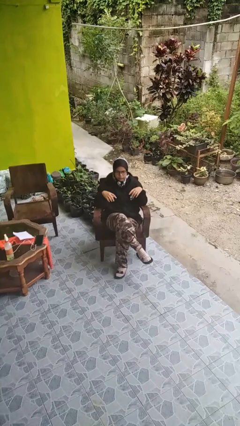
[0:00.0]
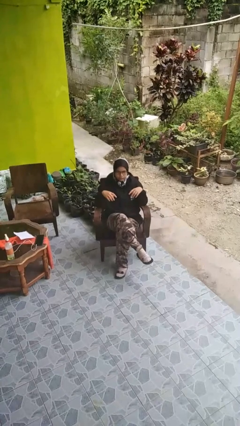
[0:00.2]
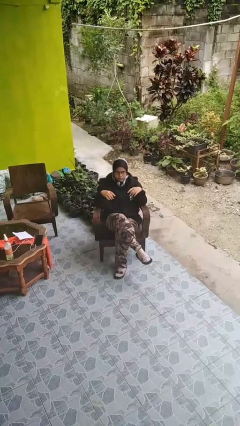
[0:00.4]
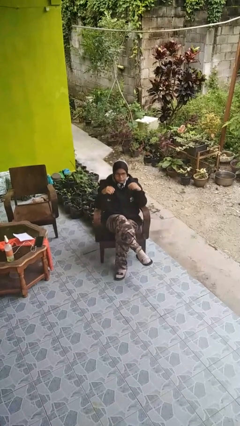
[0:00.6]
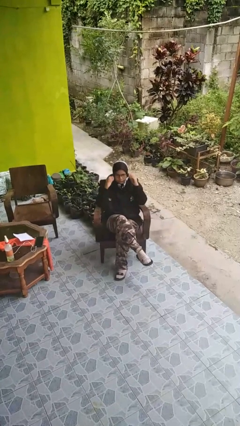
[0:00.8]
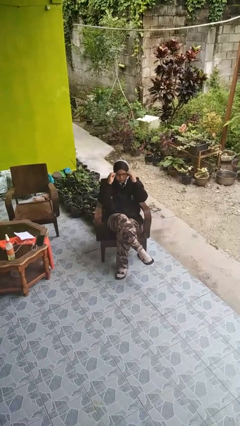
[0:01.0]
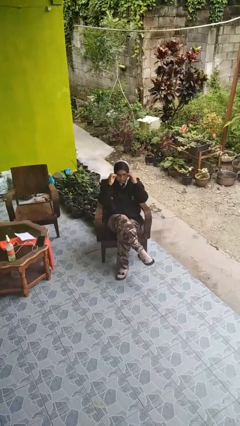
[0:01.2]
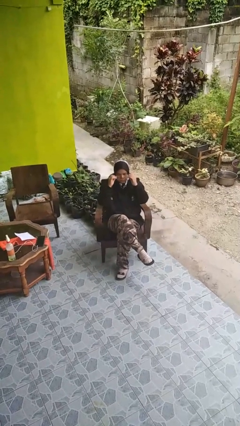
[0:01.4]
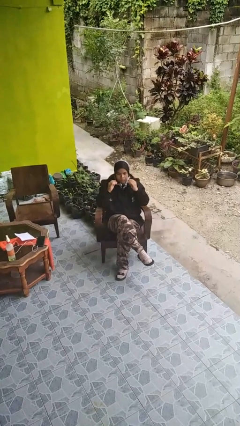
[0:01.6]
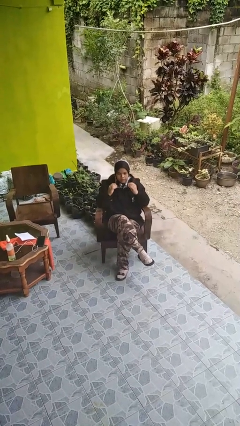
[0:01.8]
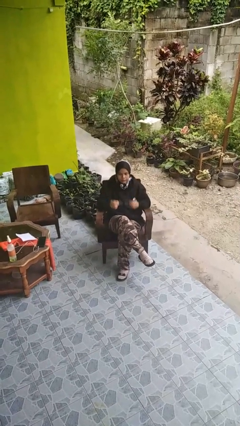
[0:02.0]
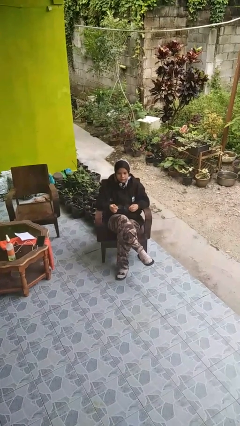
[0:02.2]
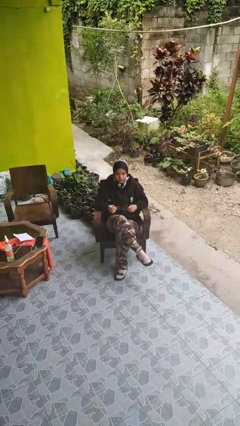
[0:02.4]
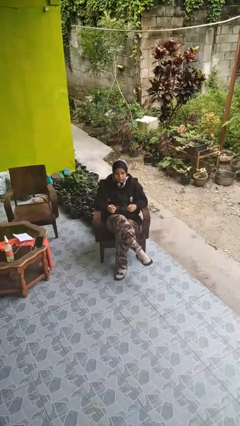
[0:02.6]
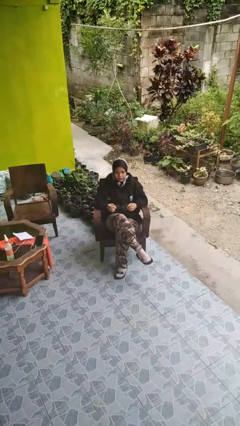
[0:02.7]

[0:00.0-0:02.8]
person takes off glasses

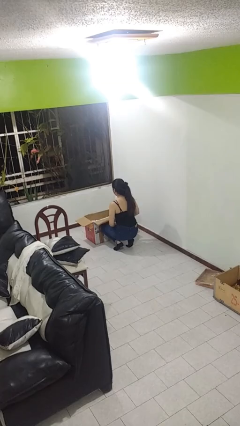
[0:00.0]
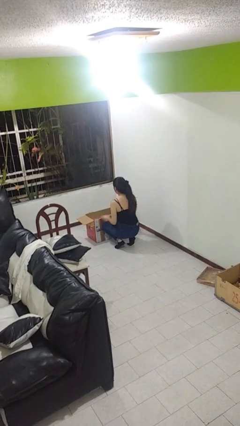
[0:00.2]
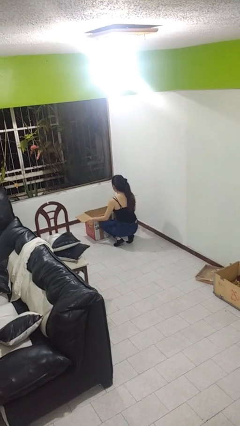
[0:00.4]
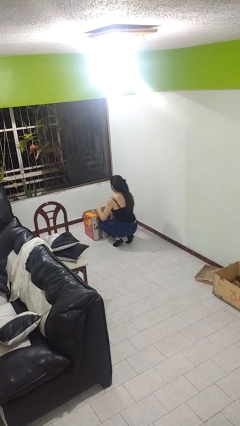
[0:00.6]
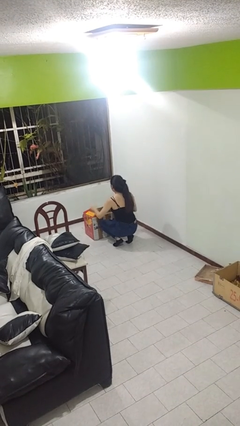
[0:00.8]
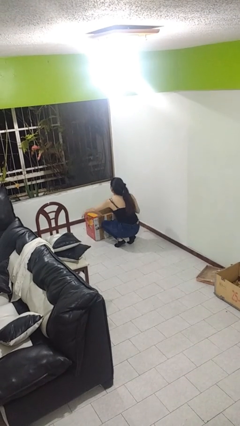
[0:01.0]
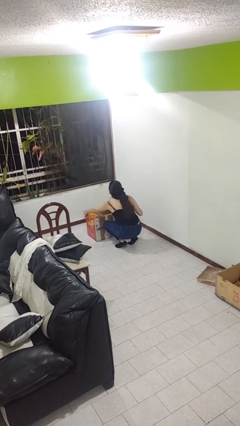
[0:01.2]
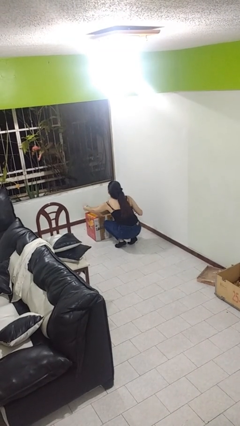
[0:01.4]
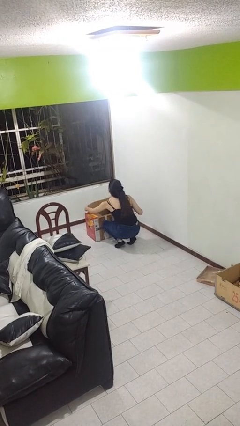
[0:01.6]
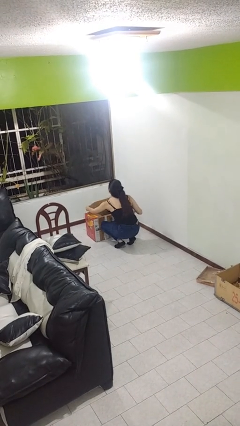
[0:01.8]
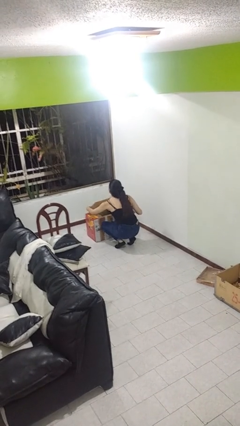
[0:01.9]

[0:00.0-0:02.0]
person closes box

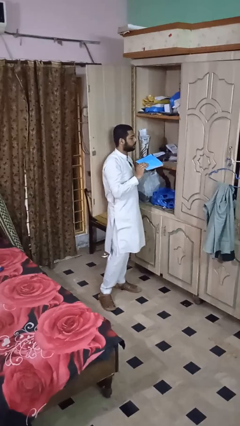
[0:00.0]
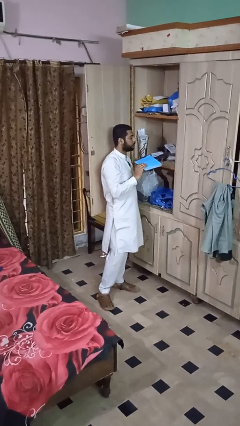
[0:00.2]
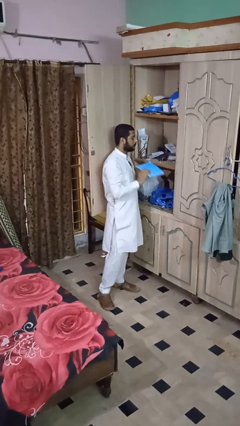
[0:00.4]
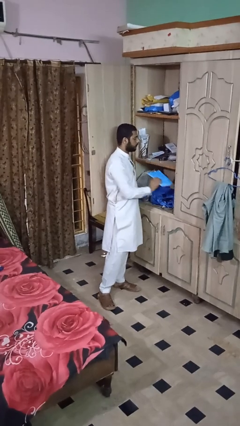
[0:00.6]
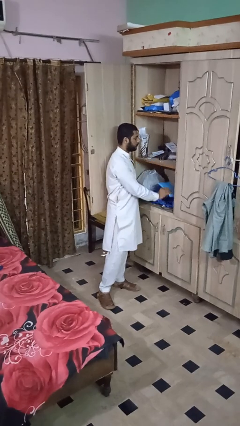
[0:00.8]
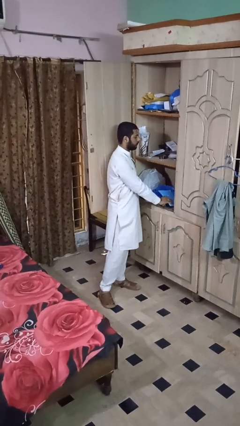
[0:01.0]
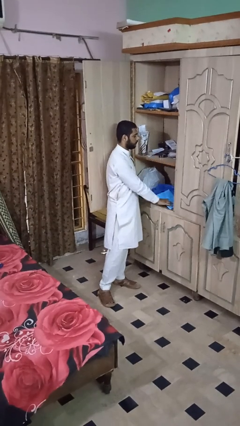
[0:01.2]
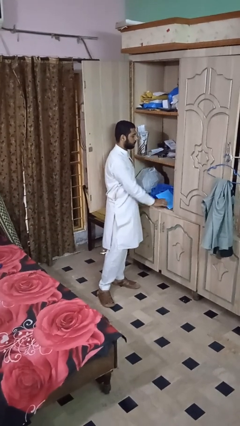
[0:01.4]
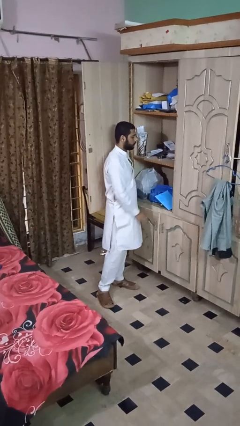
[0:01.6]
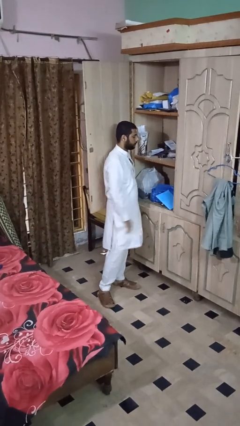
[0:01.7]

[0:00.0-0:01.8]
person puts down object on shelf

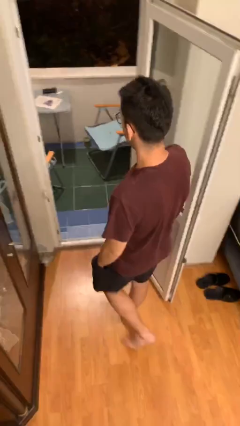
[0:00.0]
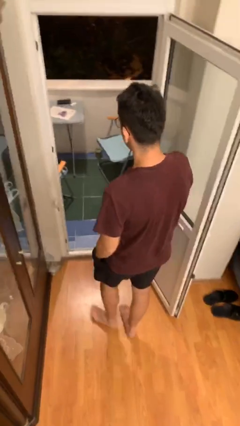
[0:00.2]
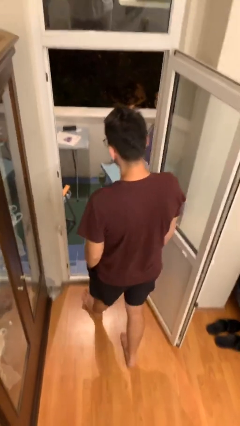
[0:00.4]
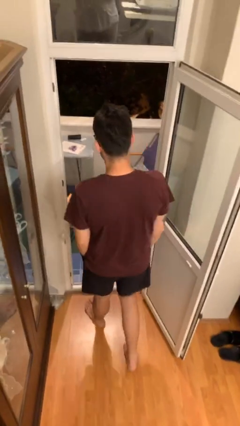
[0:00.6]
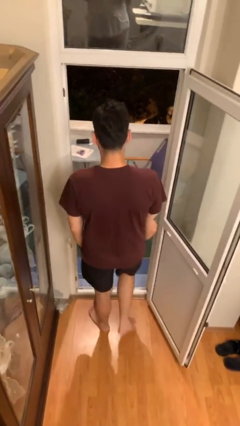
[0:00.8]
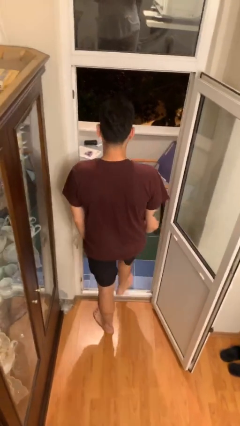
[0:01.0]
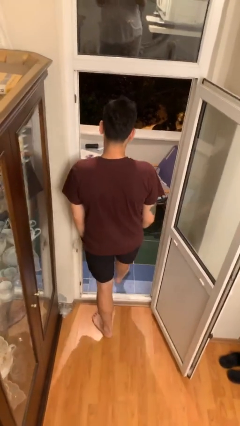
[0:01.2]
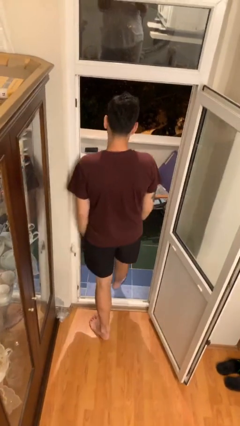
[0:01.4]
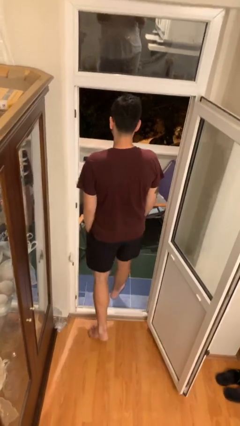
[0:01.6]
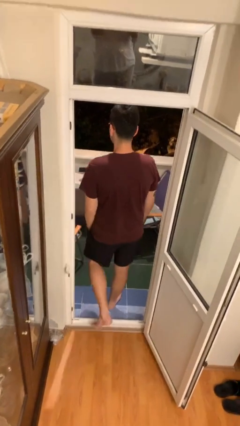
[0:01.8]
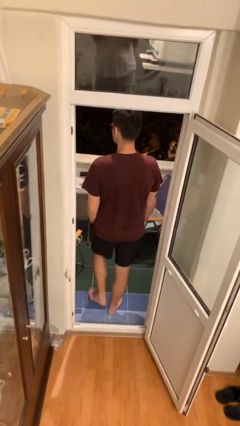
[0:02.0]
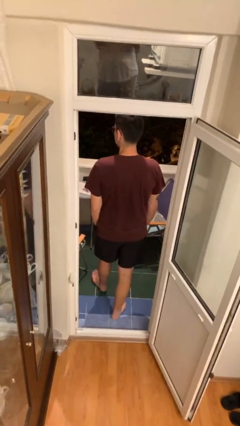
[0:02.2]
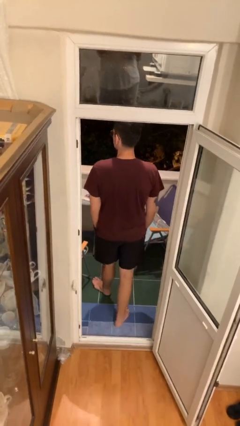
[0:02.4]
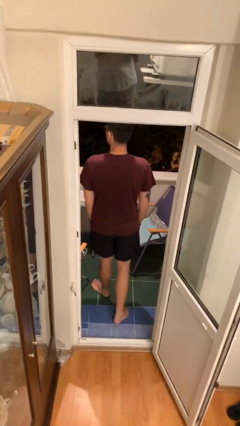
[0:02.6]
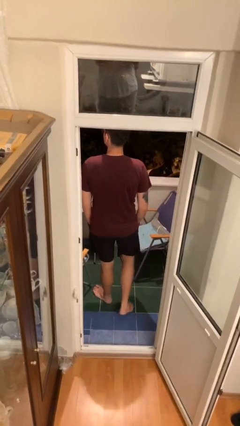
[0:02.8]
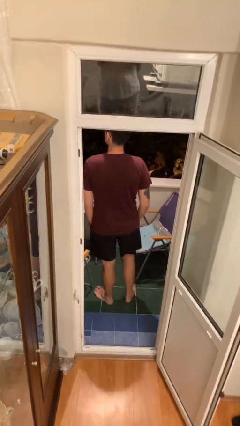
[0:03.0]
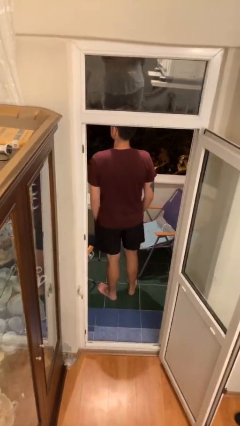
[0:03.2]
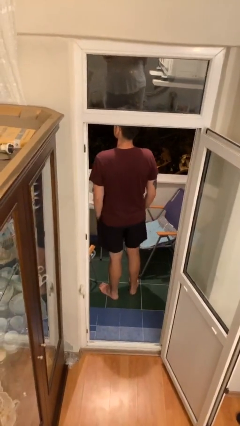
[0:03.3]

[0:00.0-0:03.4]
person exits scene through structure

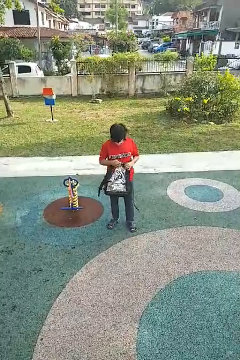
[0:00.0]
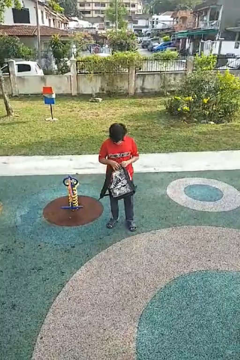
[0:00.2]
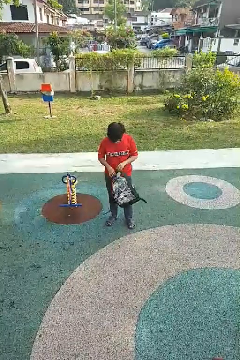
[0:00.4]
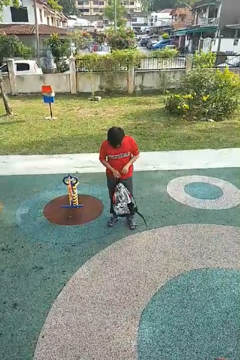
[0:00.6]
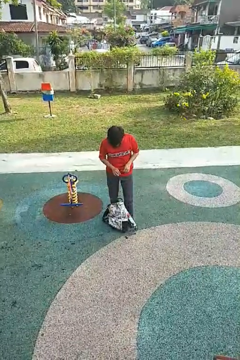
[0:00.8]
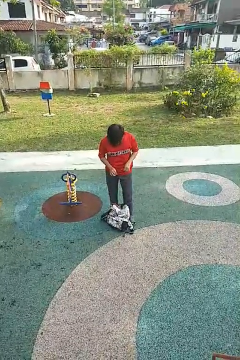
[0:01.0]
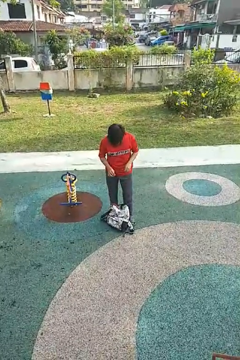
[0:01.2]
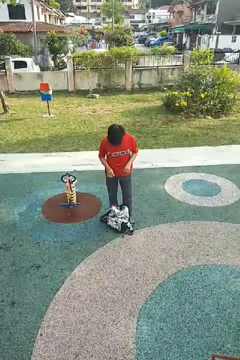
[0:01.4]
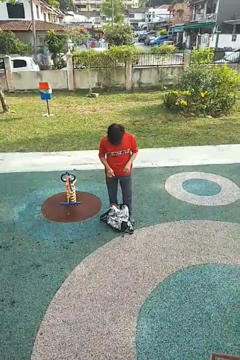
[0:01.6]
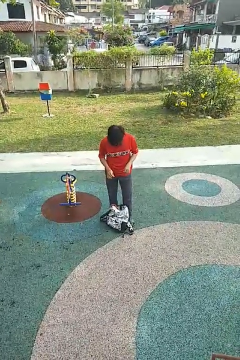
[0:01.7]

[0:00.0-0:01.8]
person drops object

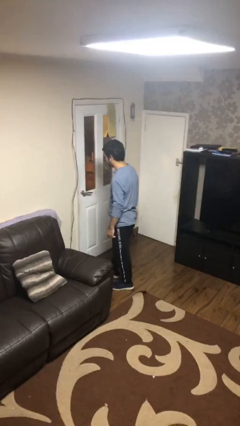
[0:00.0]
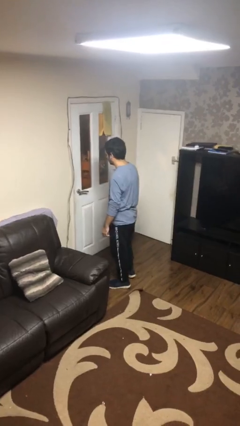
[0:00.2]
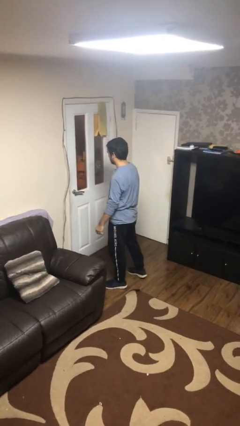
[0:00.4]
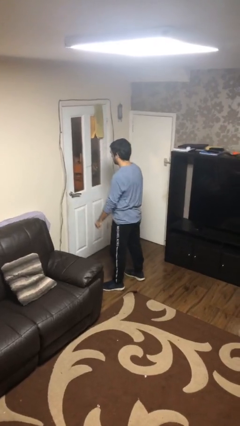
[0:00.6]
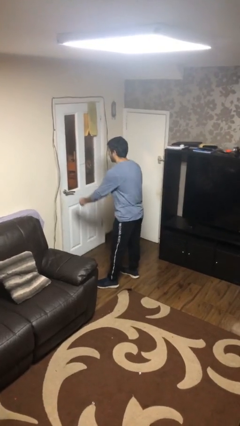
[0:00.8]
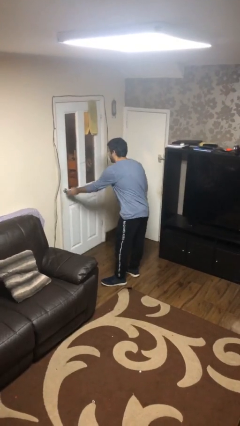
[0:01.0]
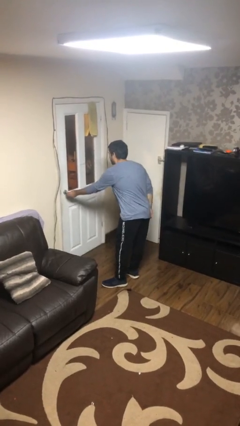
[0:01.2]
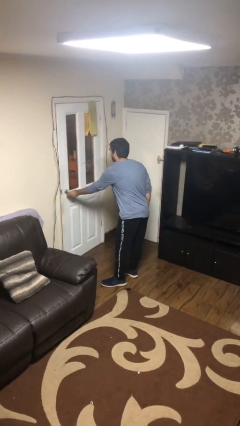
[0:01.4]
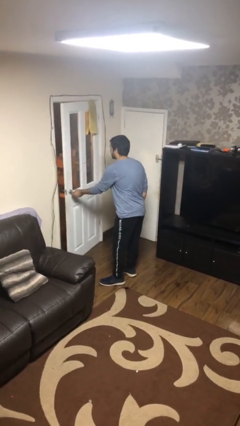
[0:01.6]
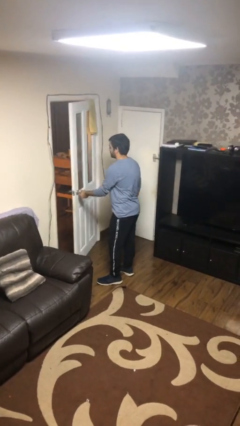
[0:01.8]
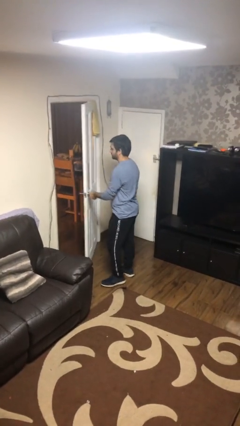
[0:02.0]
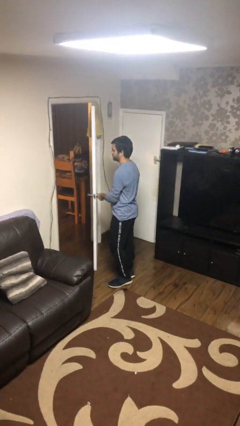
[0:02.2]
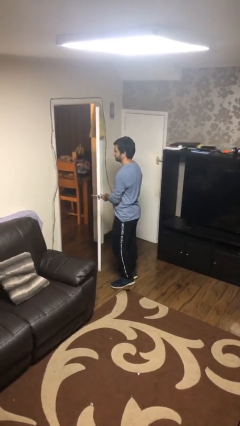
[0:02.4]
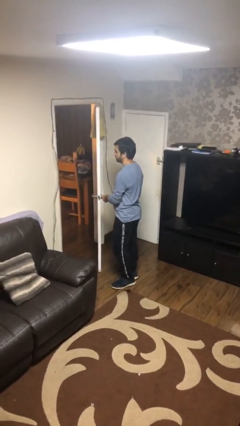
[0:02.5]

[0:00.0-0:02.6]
person opens facility door

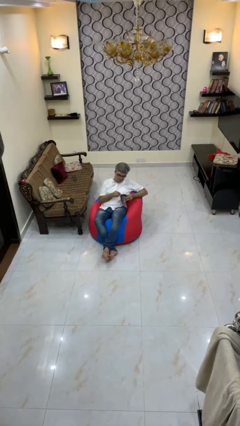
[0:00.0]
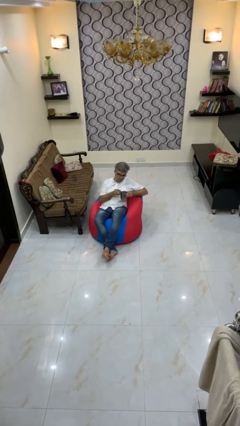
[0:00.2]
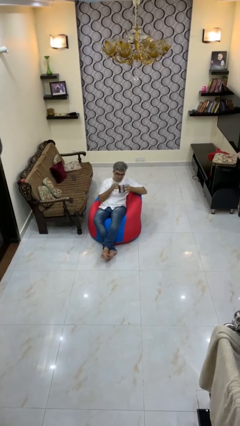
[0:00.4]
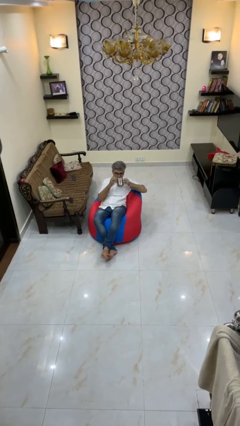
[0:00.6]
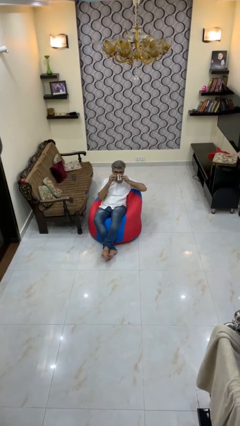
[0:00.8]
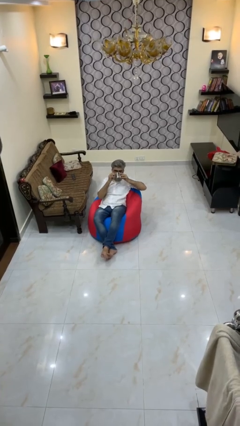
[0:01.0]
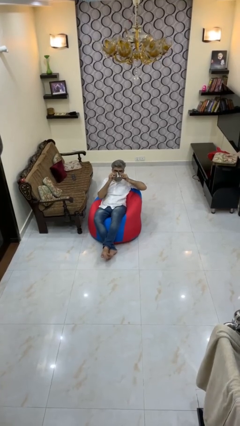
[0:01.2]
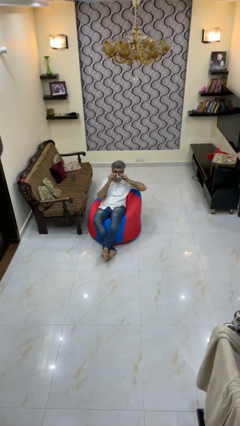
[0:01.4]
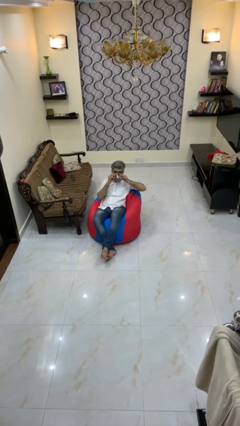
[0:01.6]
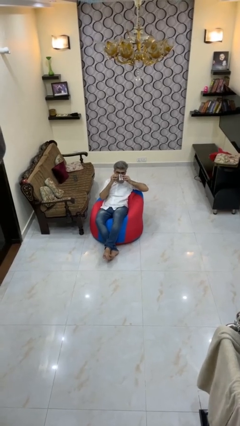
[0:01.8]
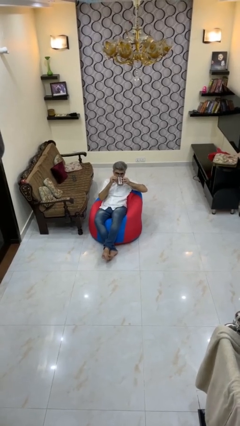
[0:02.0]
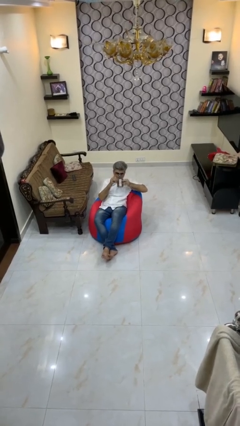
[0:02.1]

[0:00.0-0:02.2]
person drinks from mug
